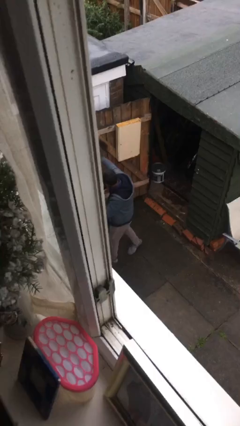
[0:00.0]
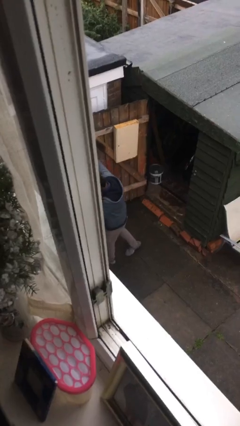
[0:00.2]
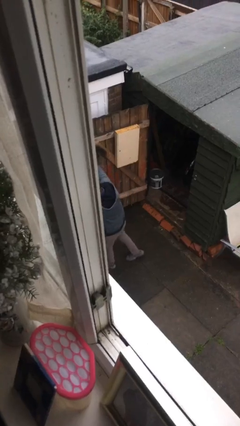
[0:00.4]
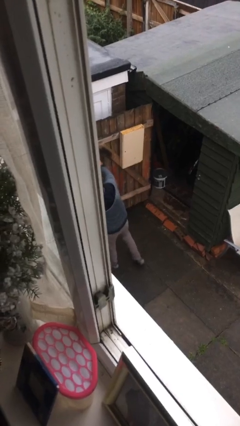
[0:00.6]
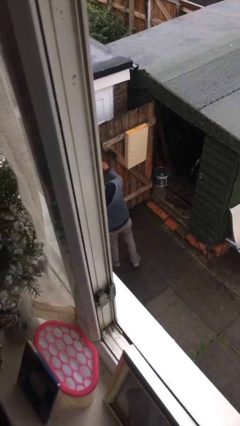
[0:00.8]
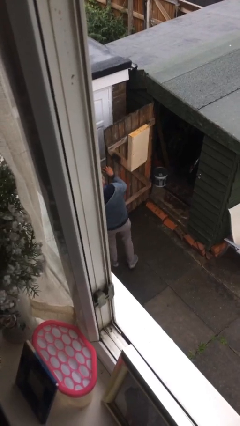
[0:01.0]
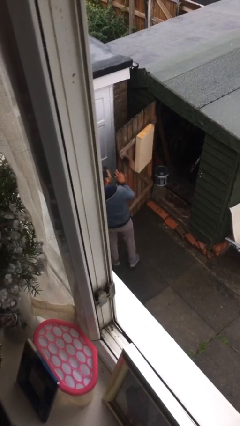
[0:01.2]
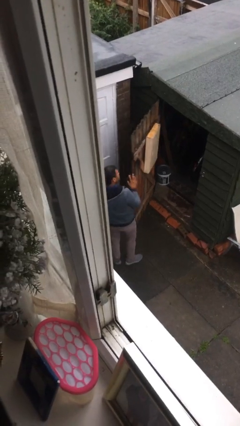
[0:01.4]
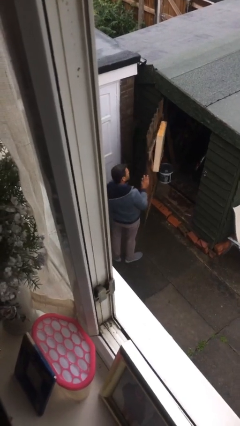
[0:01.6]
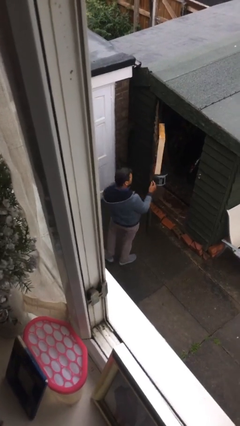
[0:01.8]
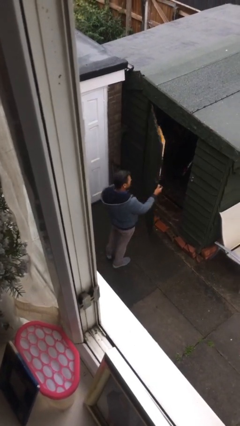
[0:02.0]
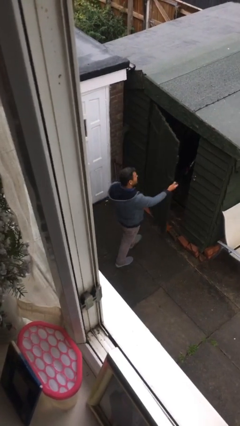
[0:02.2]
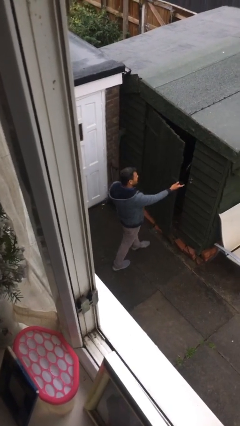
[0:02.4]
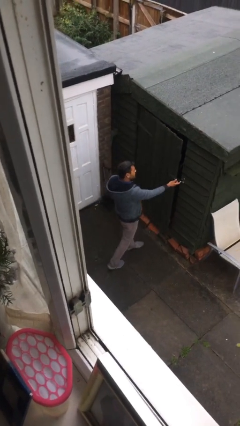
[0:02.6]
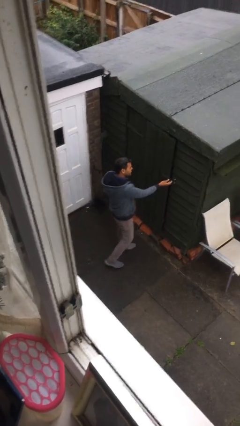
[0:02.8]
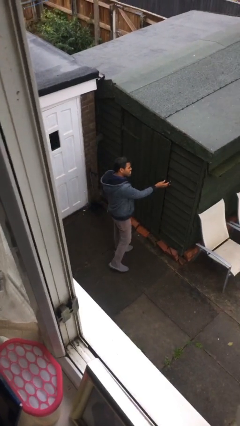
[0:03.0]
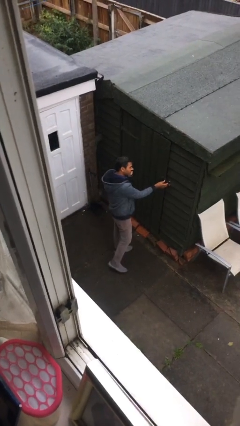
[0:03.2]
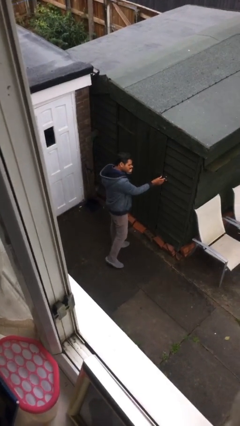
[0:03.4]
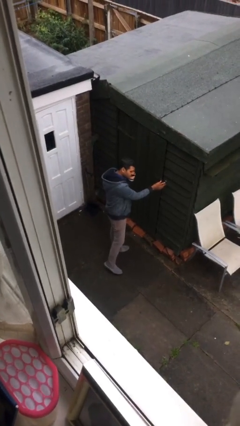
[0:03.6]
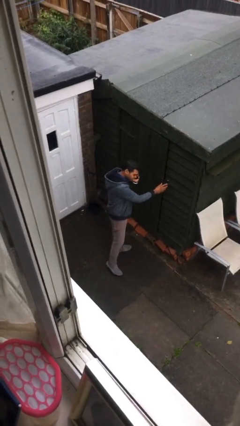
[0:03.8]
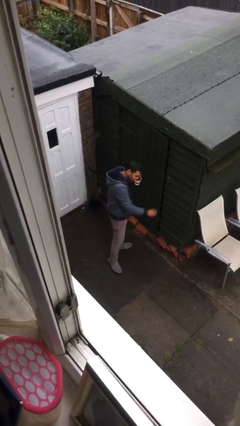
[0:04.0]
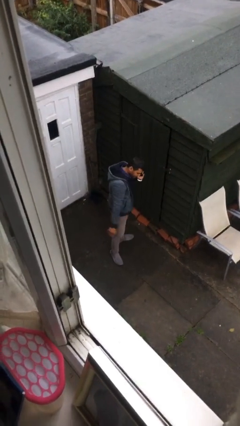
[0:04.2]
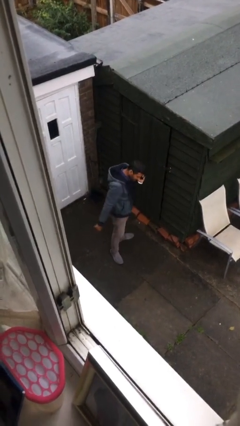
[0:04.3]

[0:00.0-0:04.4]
person closes facility door

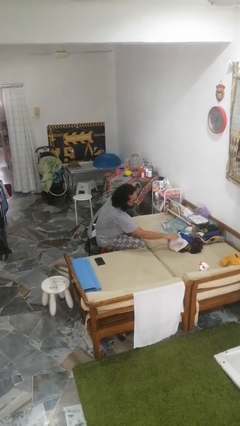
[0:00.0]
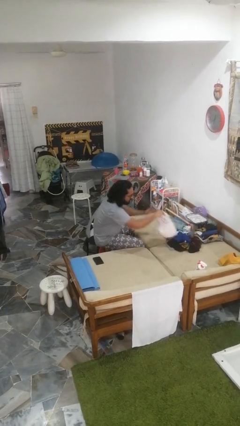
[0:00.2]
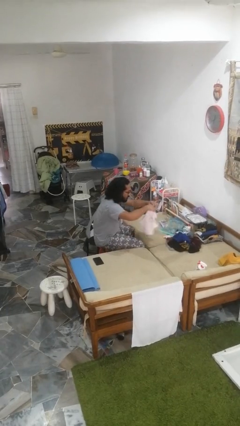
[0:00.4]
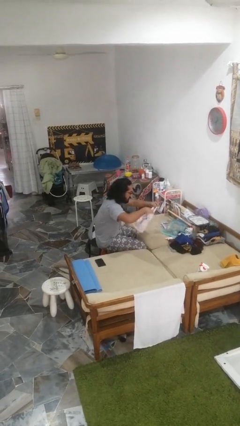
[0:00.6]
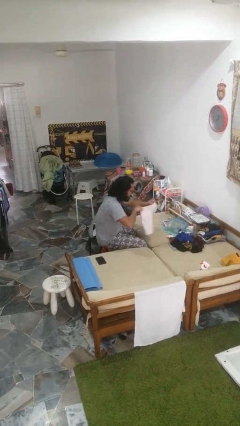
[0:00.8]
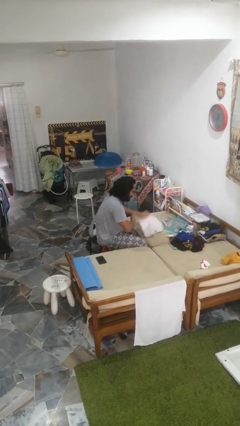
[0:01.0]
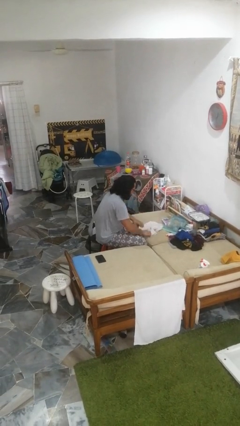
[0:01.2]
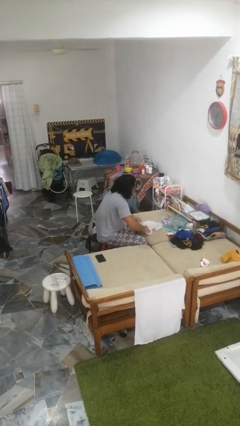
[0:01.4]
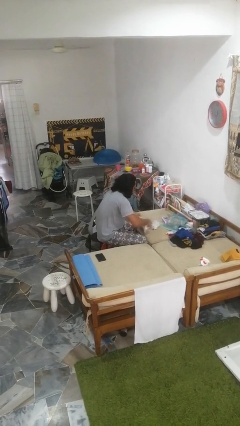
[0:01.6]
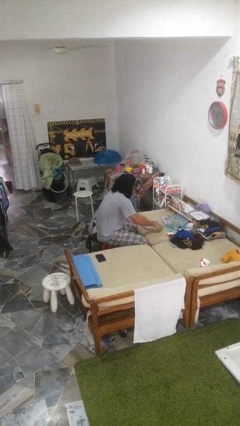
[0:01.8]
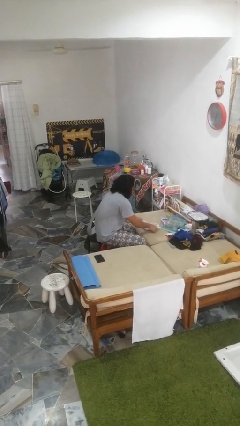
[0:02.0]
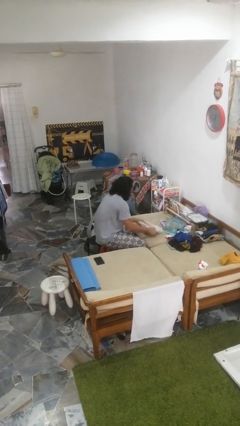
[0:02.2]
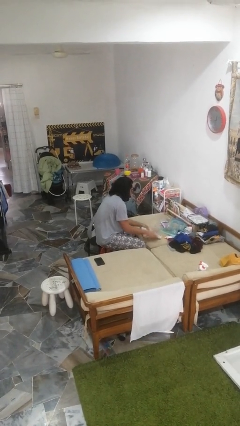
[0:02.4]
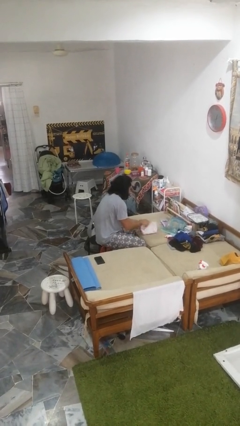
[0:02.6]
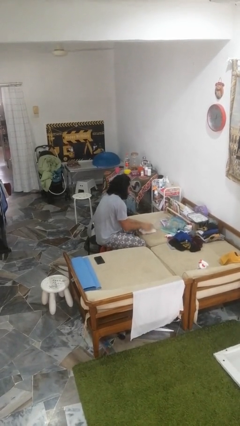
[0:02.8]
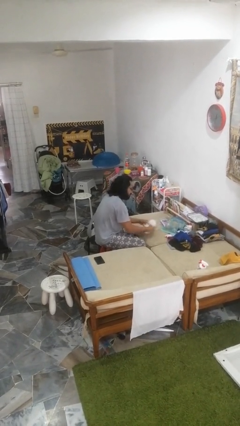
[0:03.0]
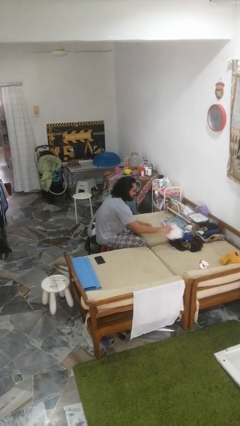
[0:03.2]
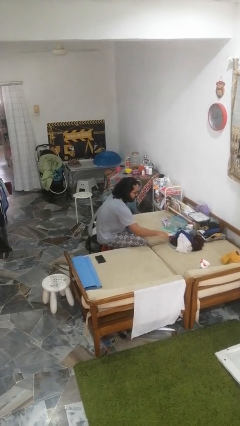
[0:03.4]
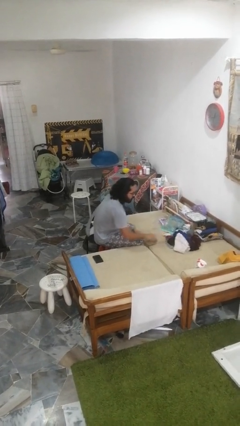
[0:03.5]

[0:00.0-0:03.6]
person folds pants

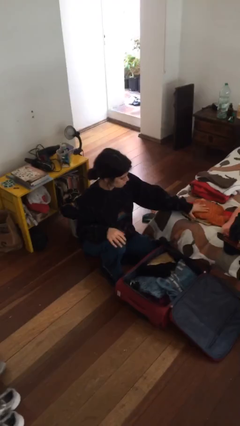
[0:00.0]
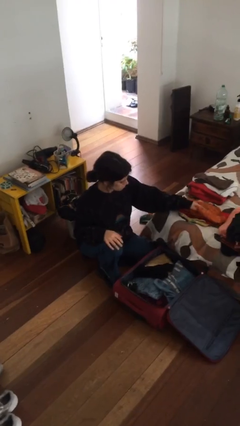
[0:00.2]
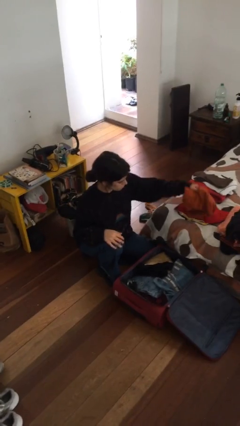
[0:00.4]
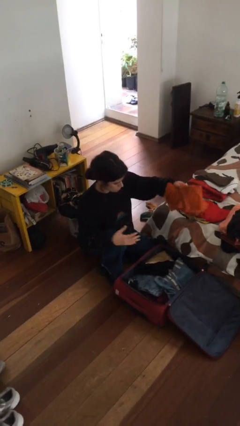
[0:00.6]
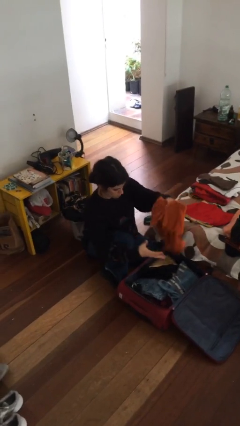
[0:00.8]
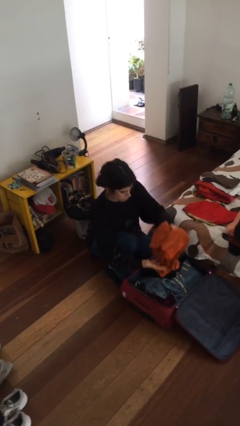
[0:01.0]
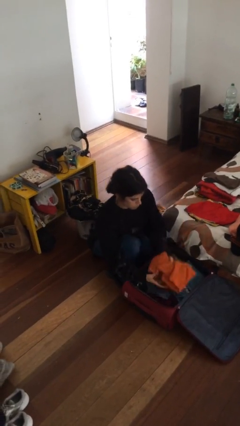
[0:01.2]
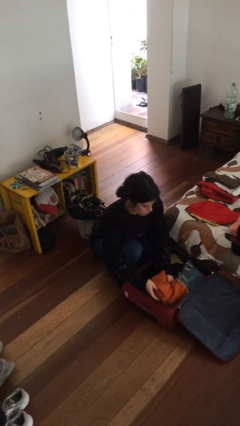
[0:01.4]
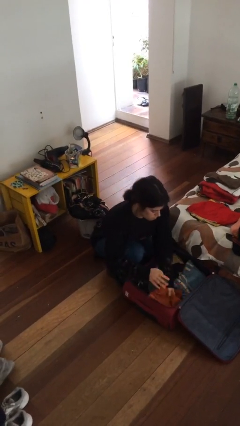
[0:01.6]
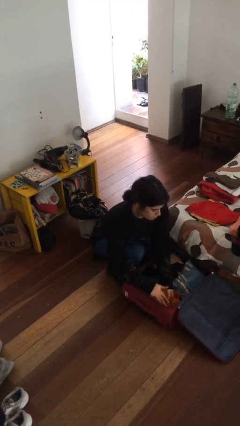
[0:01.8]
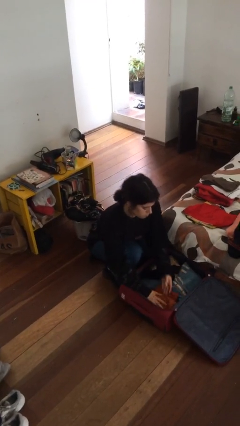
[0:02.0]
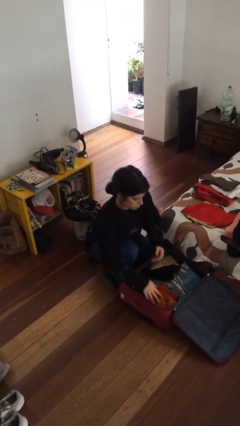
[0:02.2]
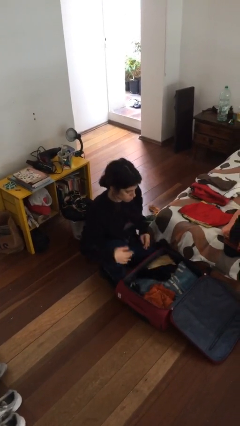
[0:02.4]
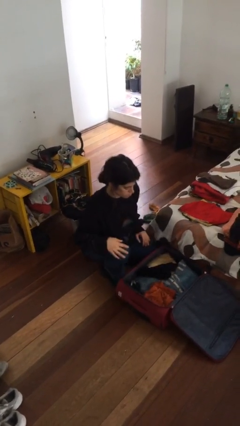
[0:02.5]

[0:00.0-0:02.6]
person loads clothes into suitcase

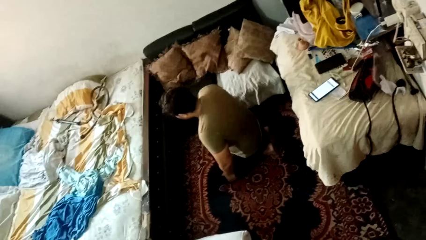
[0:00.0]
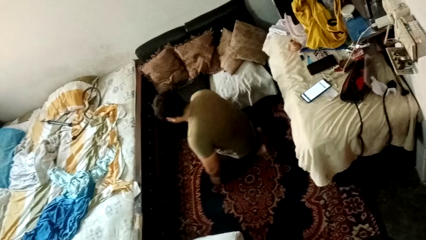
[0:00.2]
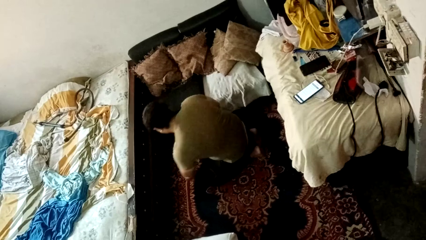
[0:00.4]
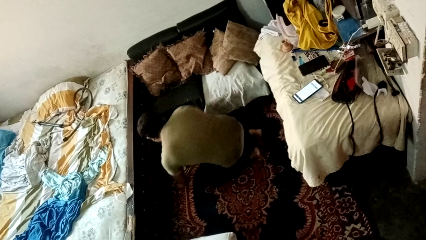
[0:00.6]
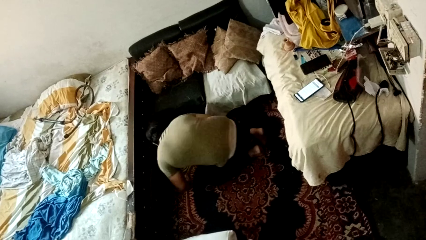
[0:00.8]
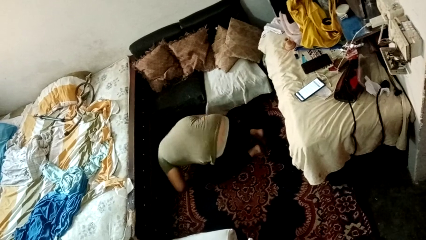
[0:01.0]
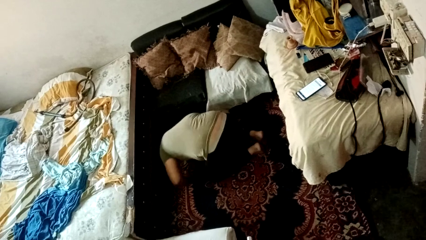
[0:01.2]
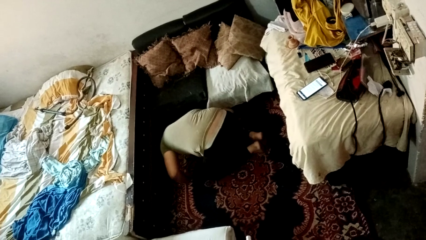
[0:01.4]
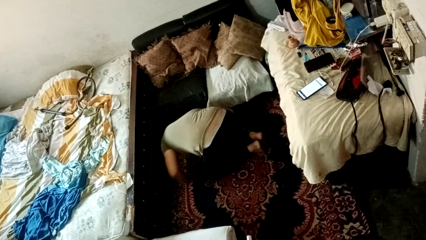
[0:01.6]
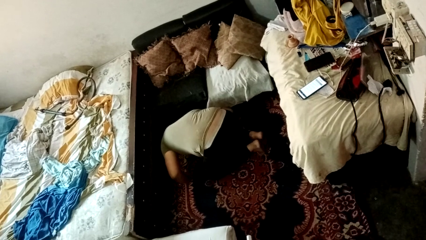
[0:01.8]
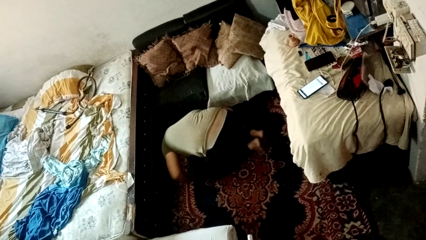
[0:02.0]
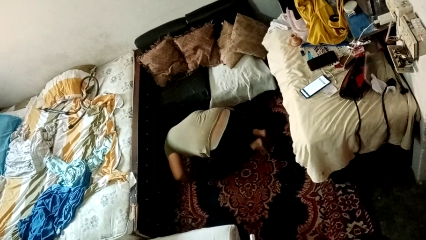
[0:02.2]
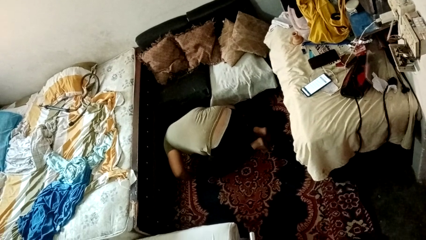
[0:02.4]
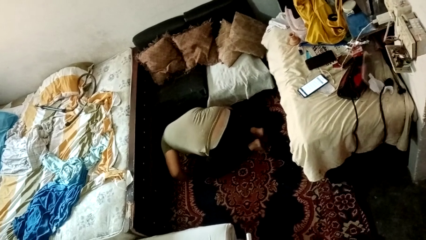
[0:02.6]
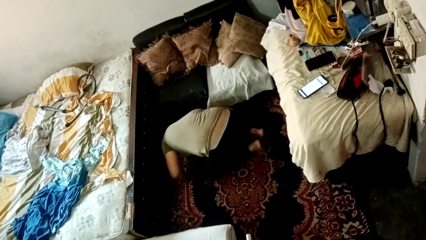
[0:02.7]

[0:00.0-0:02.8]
person searches under bed

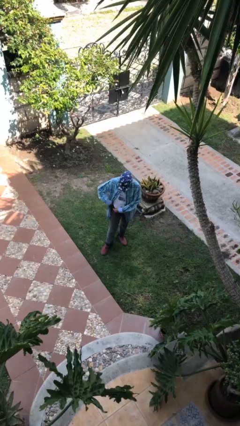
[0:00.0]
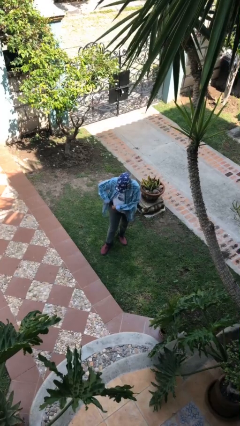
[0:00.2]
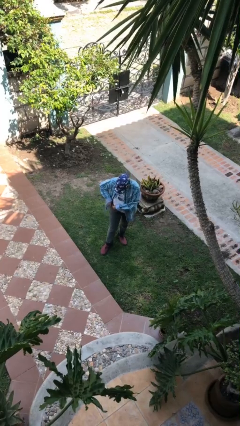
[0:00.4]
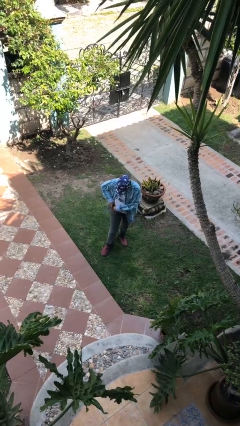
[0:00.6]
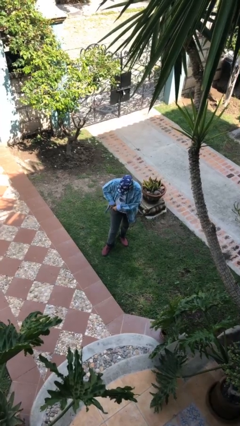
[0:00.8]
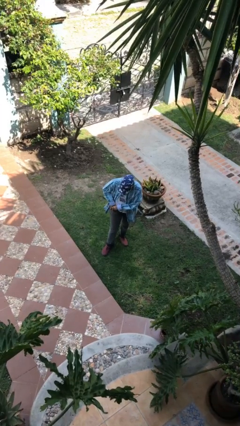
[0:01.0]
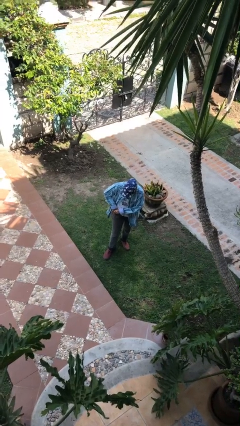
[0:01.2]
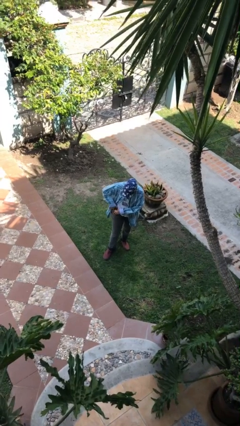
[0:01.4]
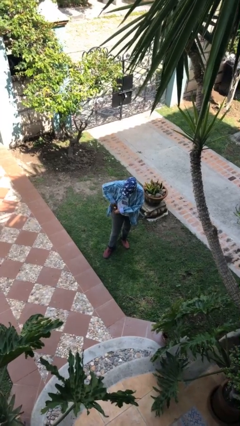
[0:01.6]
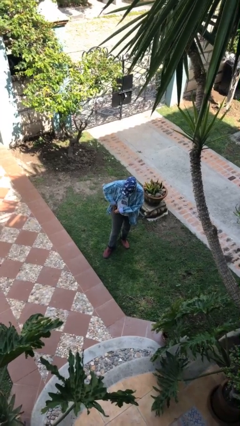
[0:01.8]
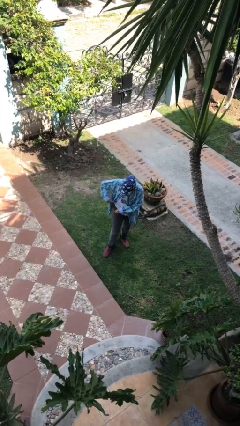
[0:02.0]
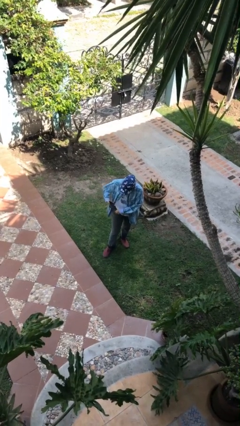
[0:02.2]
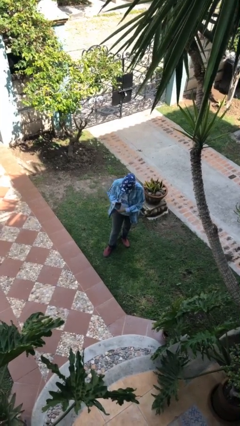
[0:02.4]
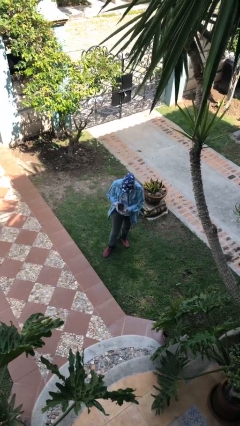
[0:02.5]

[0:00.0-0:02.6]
person takes phone from pocket

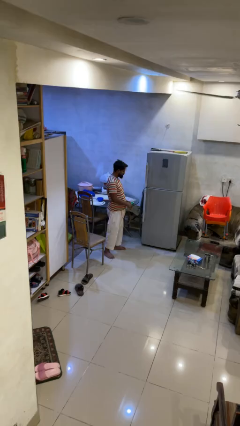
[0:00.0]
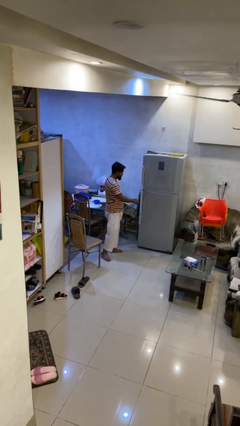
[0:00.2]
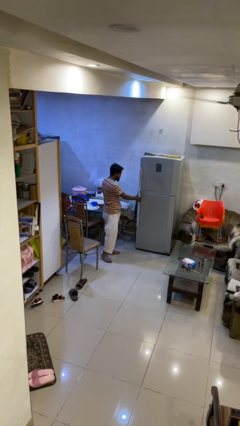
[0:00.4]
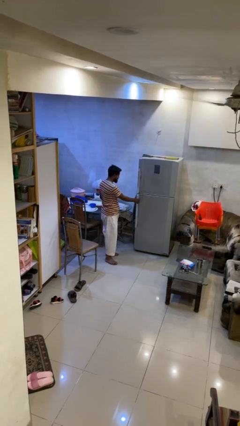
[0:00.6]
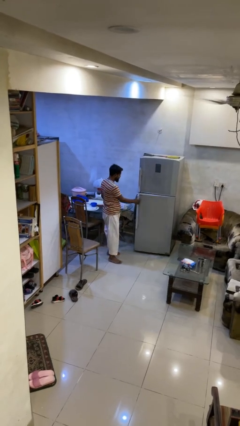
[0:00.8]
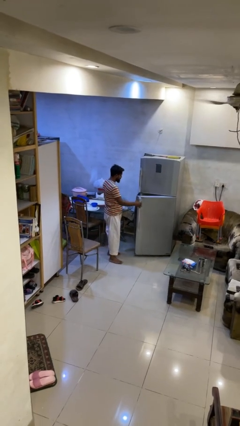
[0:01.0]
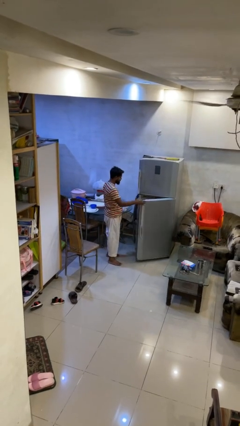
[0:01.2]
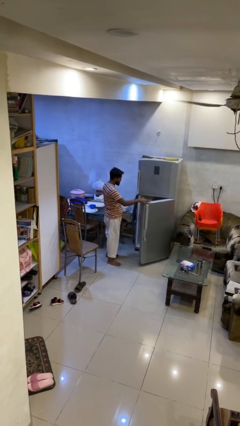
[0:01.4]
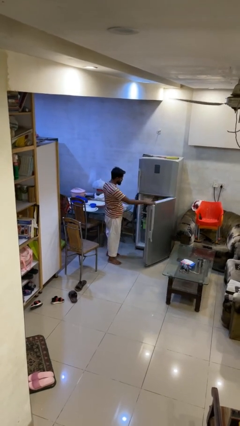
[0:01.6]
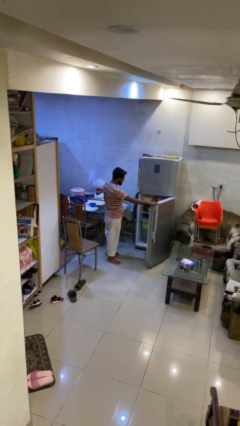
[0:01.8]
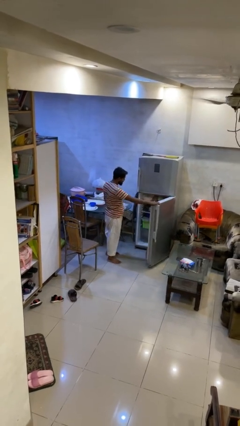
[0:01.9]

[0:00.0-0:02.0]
person opens refrigerator
